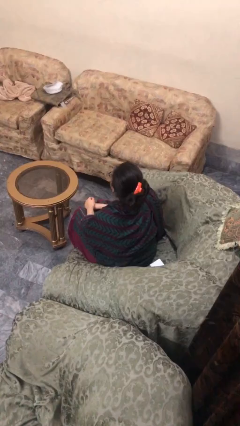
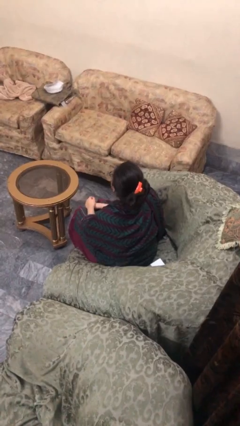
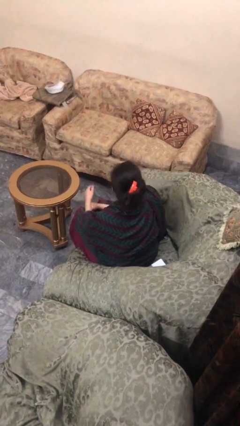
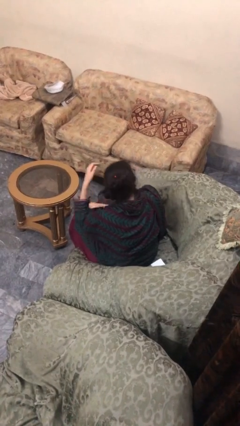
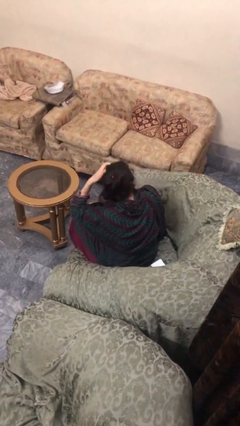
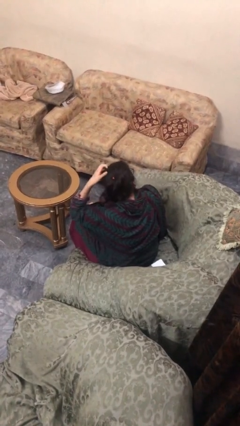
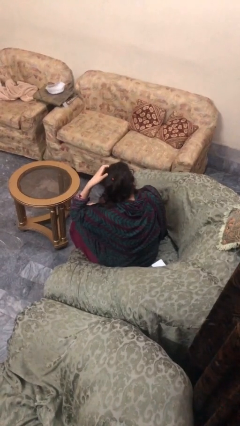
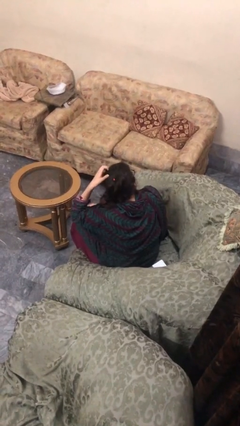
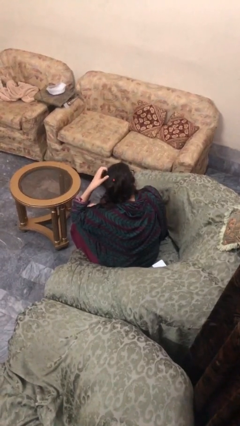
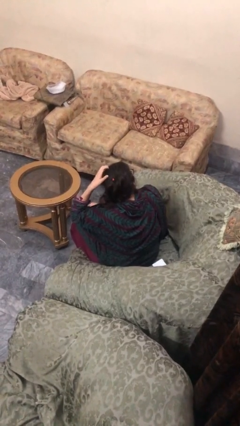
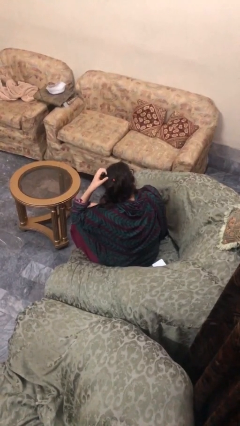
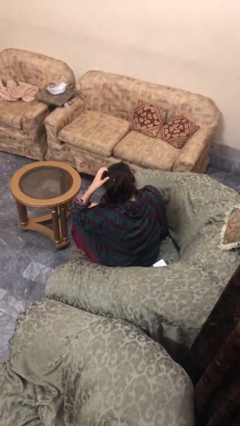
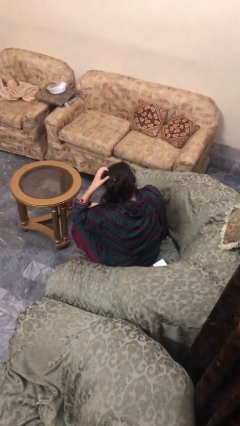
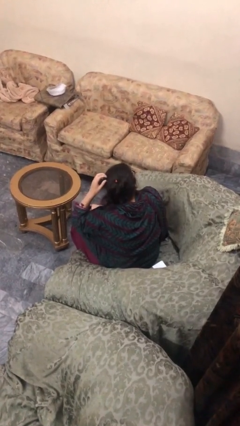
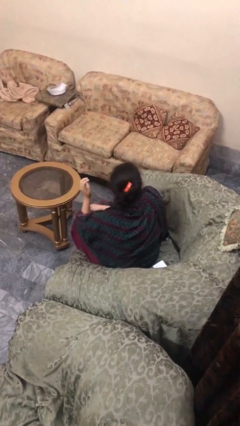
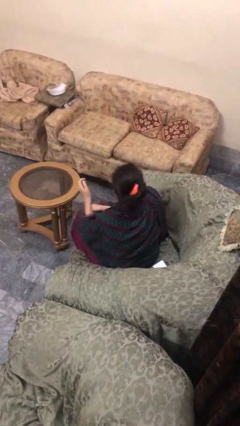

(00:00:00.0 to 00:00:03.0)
person strokes hair

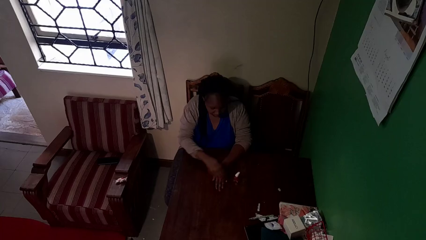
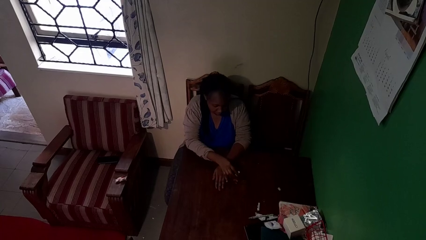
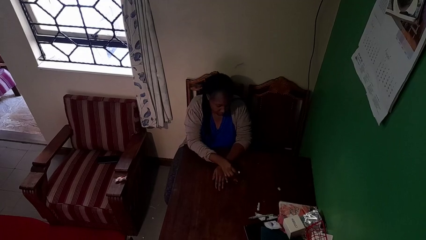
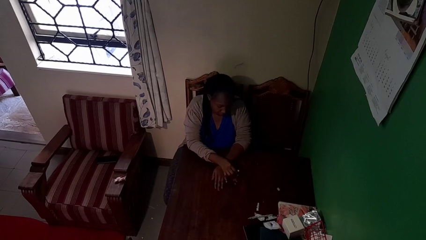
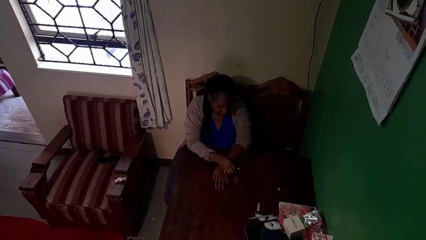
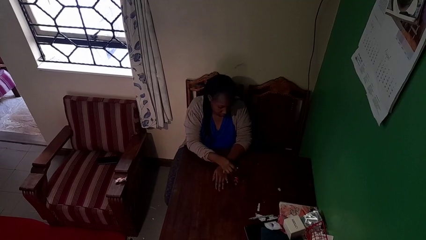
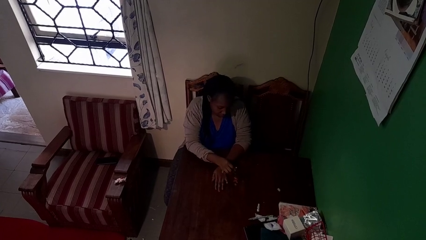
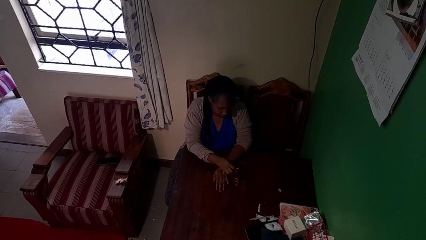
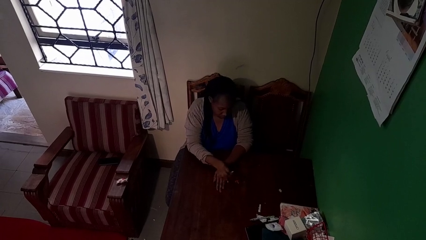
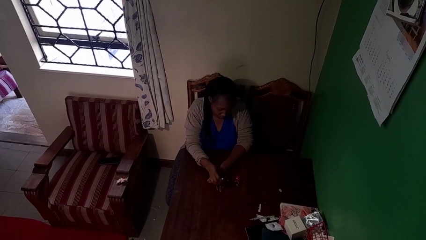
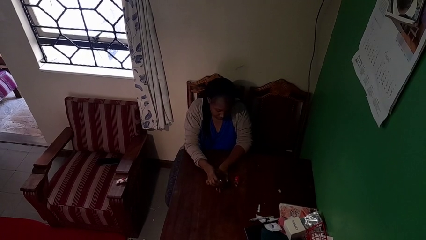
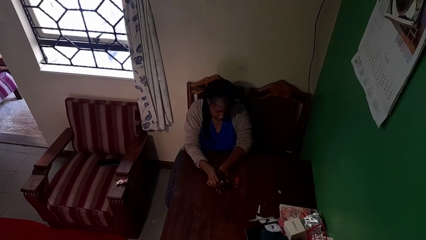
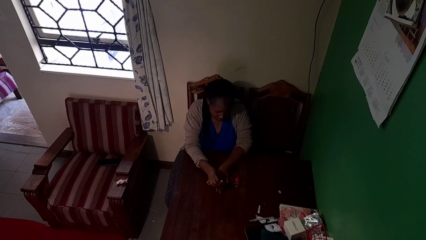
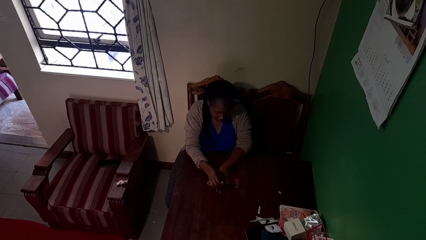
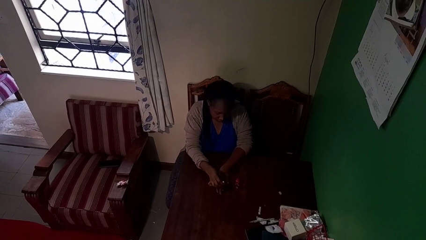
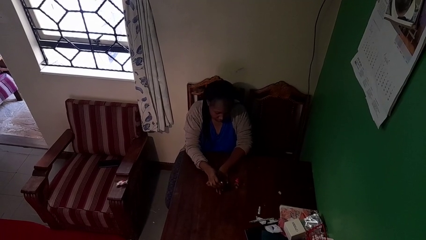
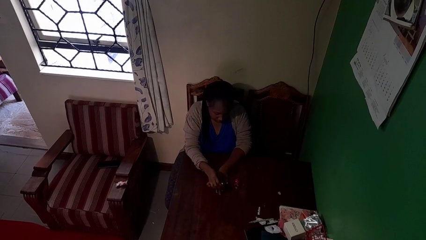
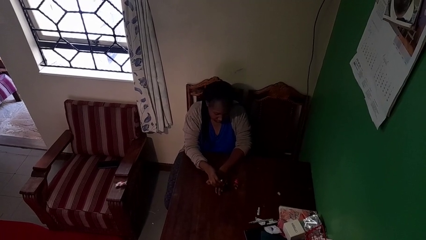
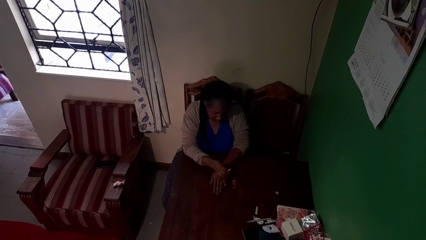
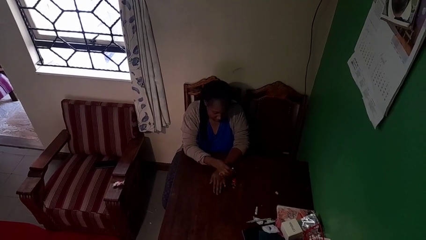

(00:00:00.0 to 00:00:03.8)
person paints fingernails

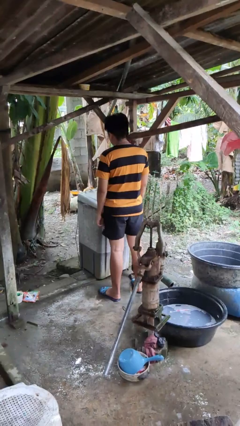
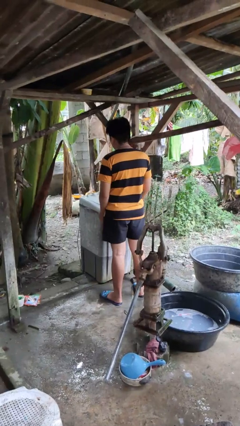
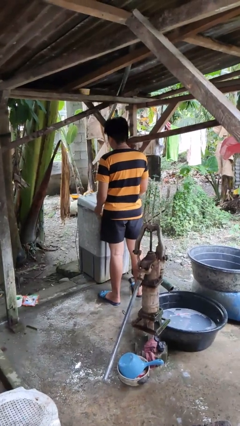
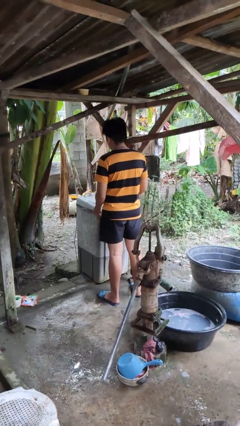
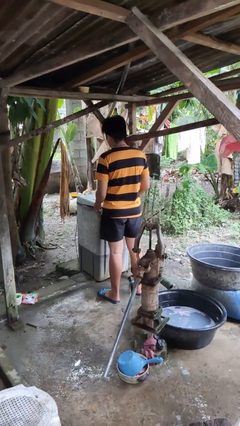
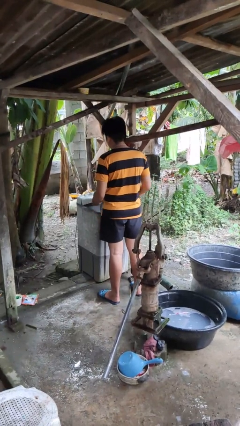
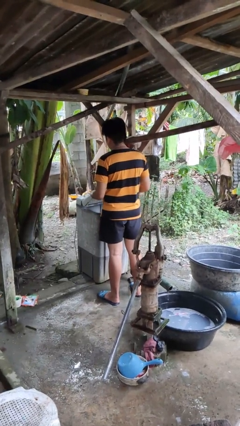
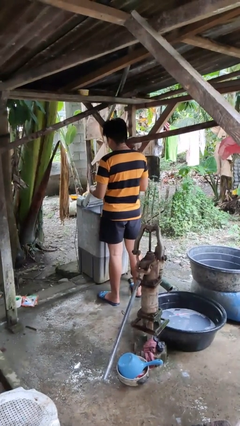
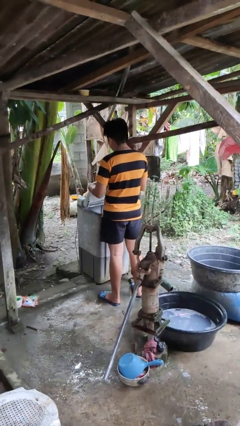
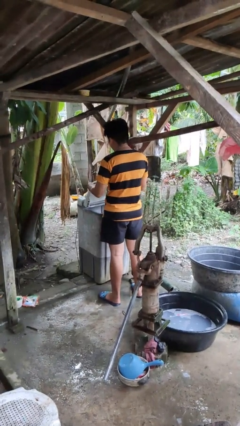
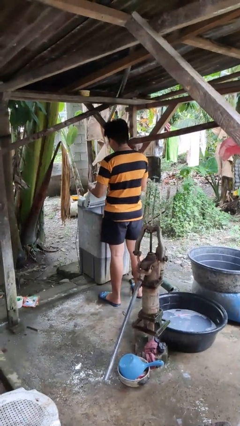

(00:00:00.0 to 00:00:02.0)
person opens clothes washer

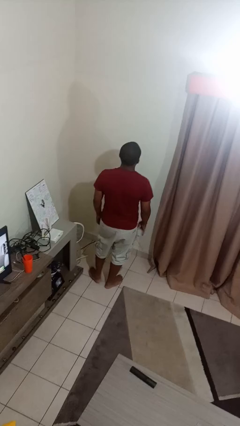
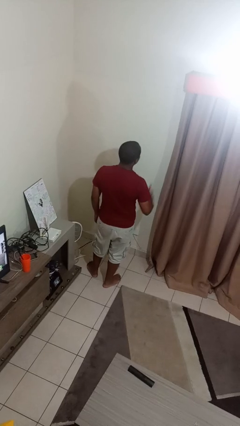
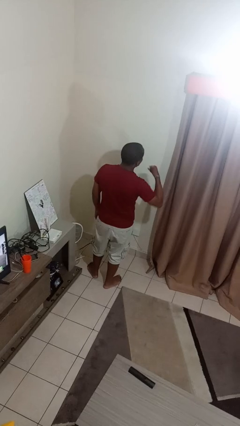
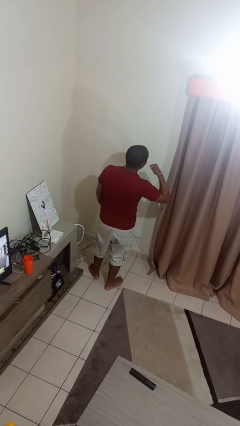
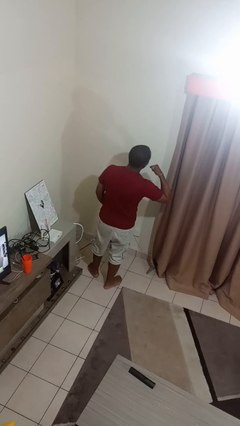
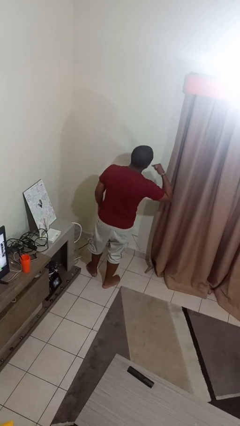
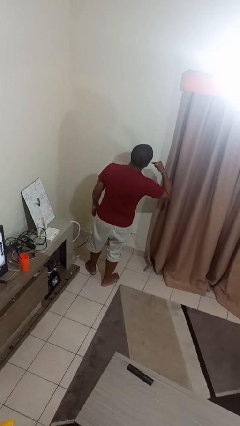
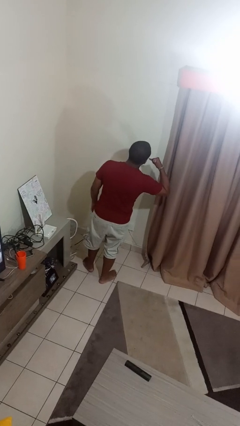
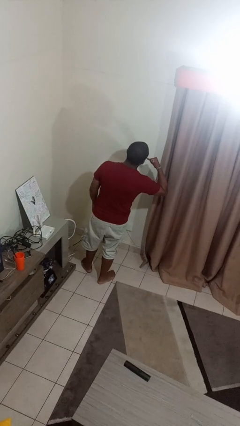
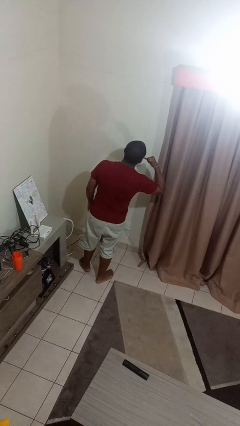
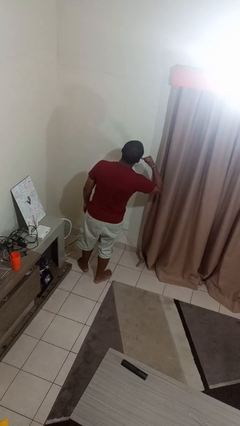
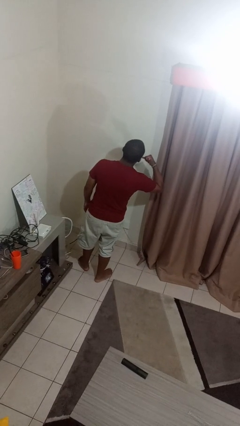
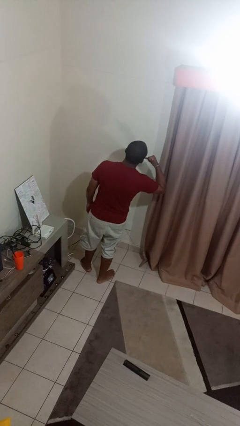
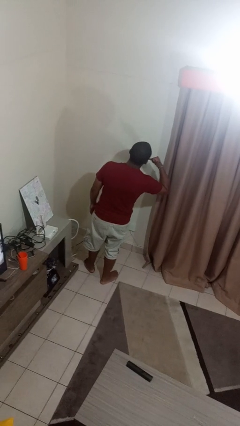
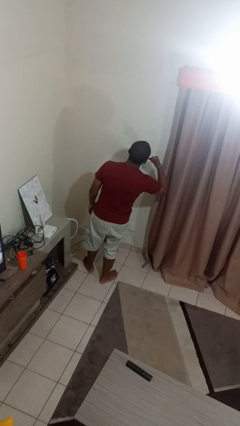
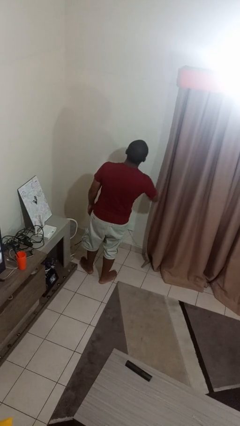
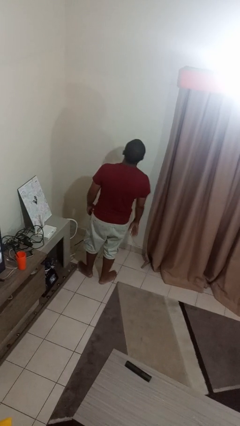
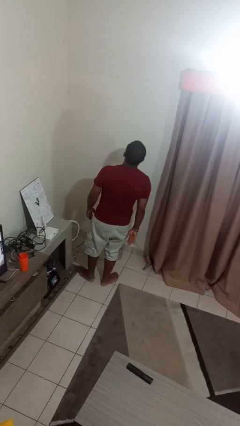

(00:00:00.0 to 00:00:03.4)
person gestures call me

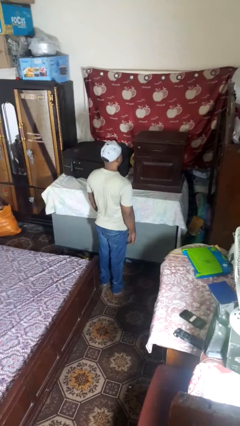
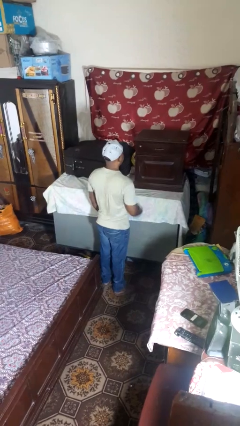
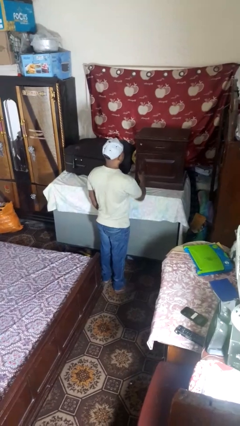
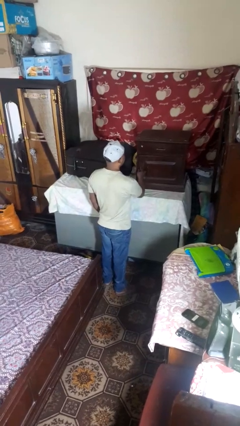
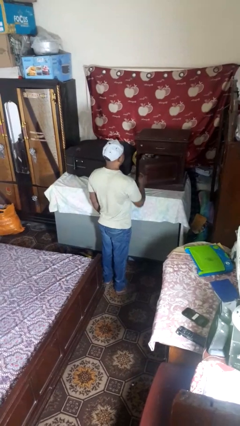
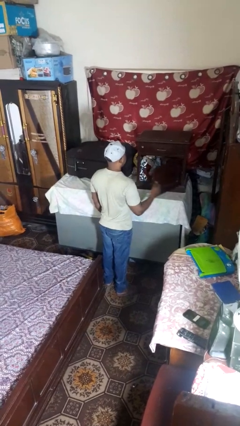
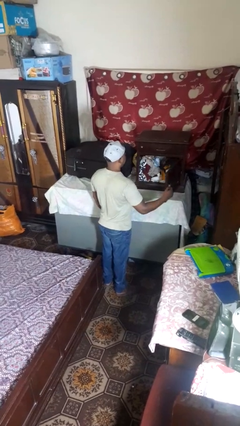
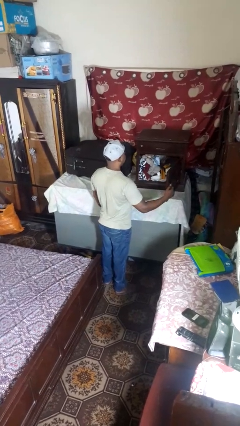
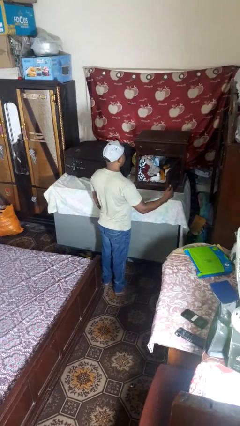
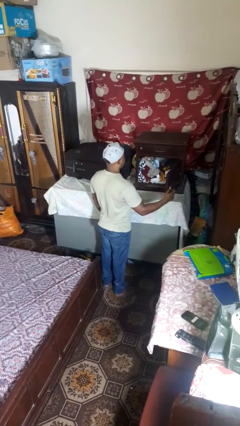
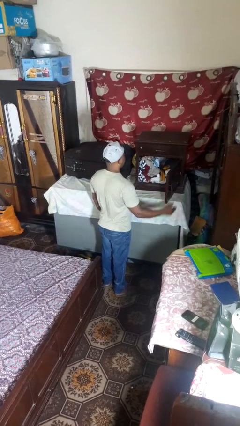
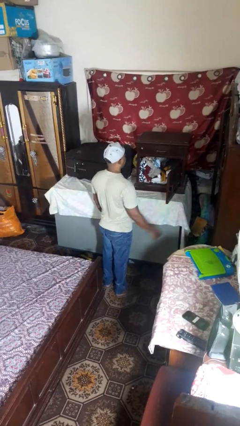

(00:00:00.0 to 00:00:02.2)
person opens closet door

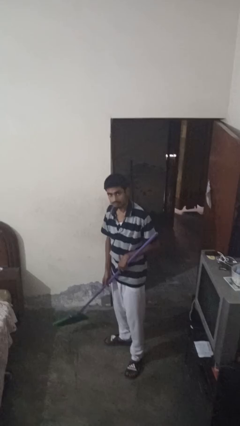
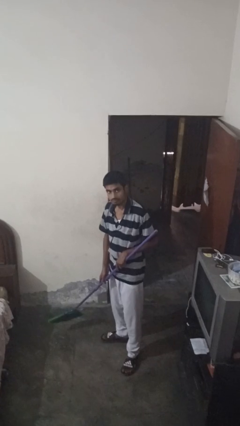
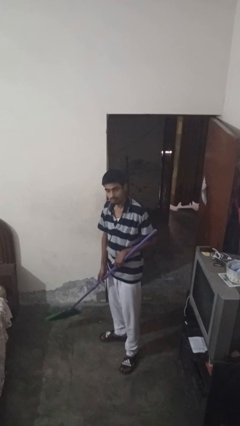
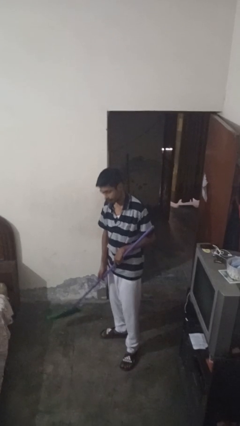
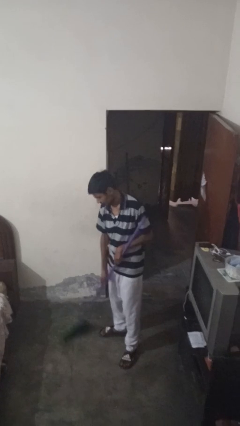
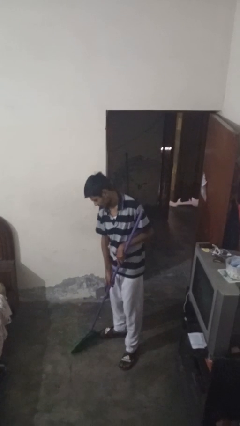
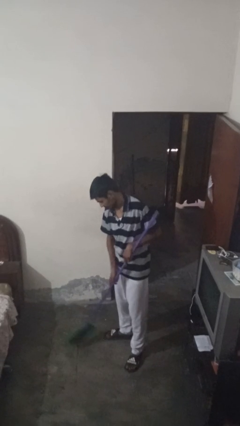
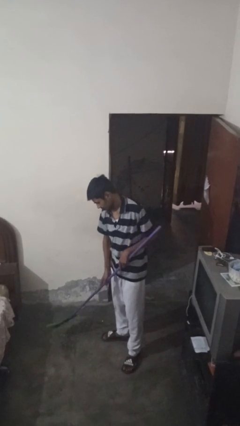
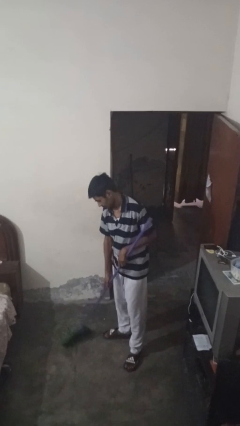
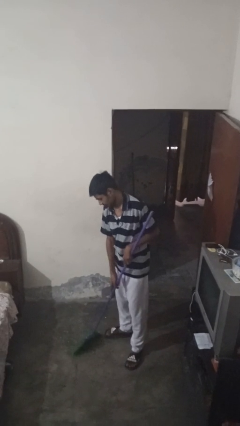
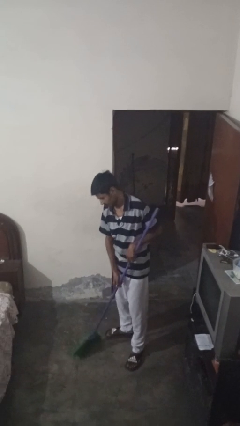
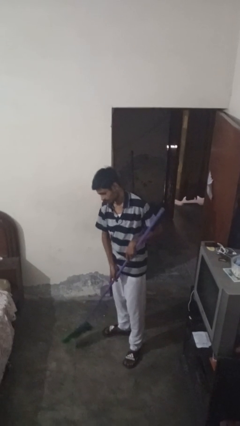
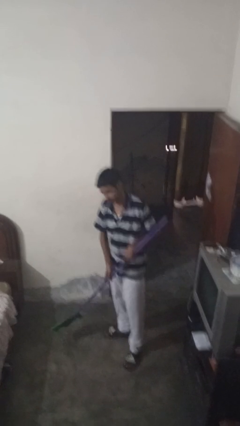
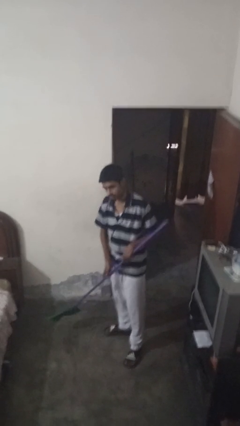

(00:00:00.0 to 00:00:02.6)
person sweeps floor

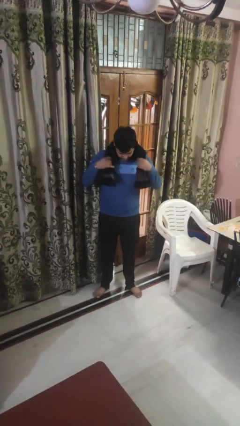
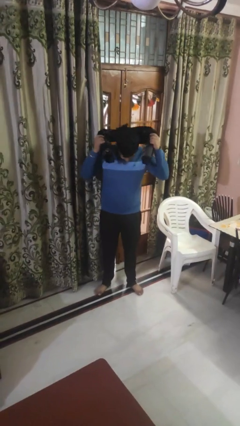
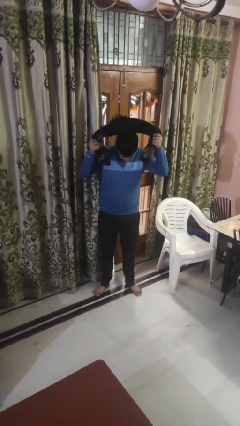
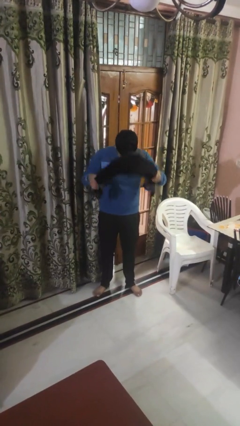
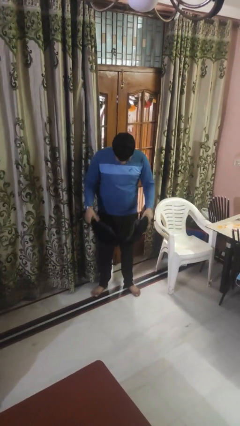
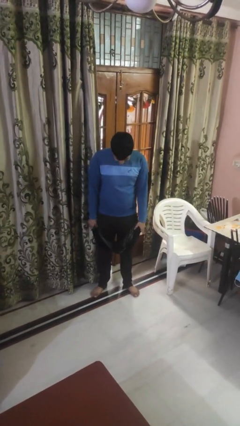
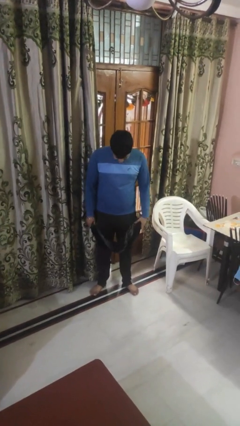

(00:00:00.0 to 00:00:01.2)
person takes off scarf
